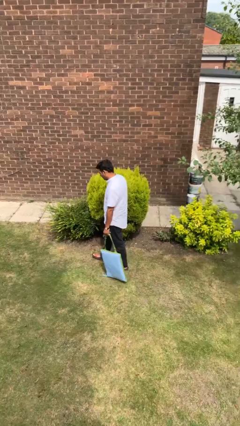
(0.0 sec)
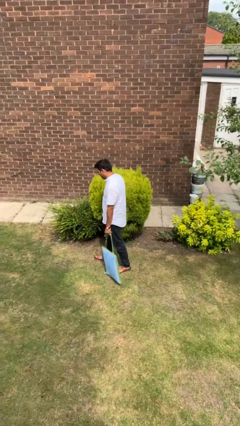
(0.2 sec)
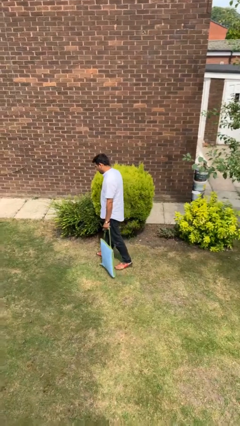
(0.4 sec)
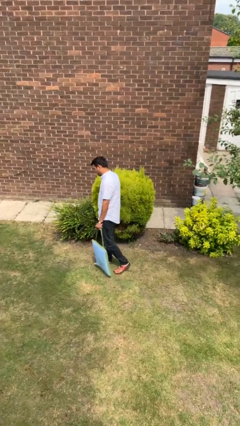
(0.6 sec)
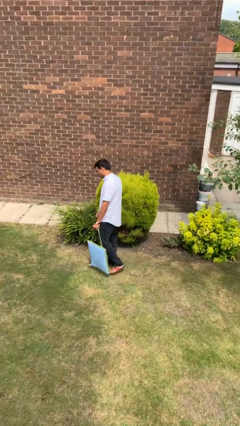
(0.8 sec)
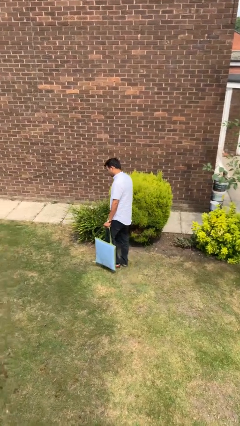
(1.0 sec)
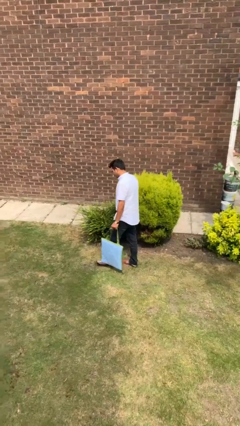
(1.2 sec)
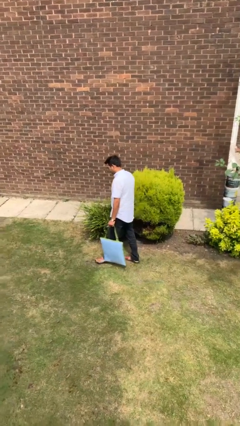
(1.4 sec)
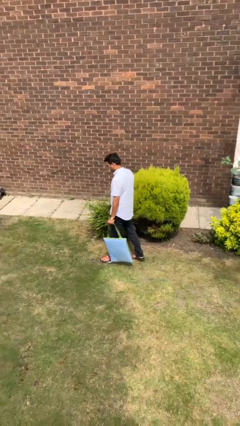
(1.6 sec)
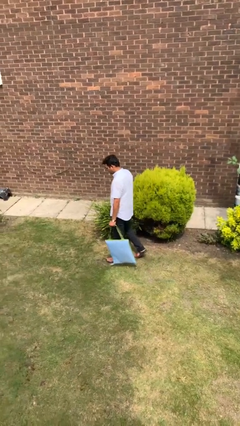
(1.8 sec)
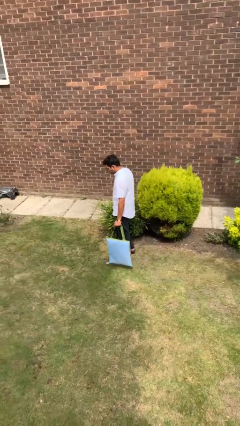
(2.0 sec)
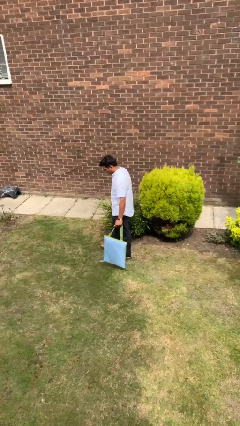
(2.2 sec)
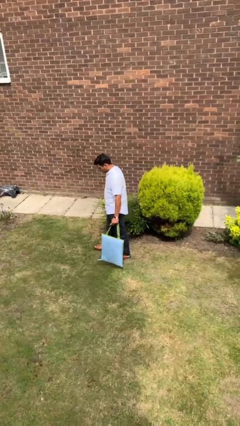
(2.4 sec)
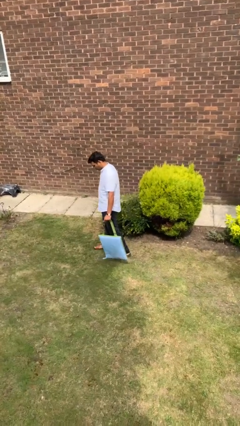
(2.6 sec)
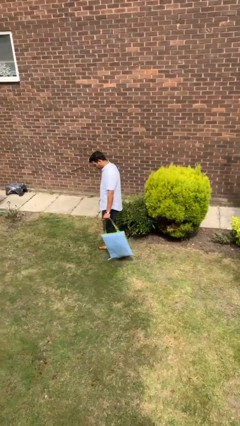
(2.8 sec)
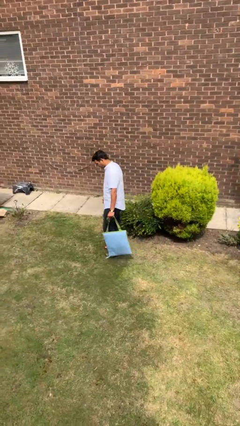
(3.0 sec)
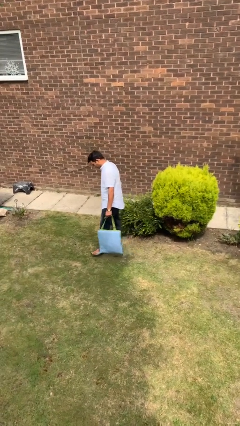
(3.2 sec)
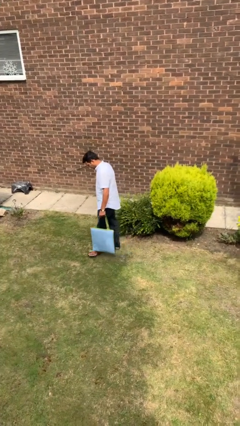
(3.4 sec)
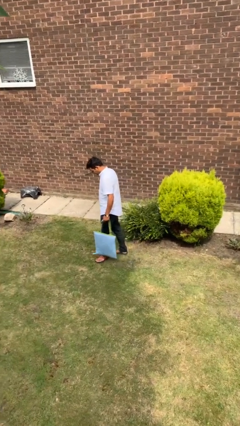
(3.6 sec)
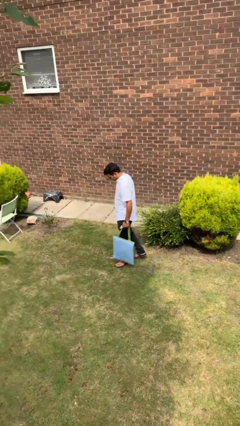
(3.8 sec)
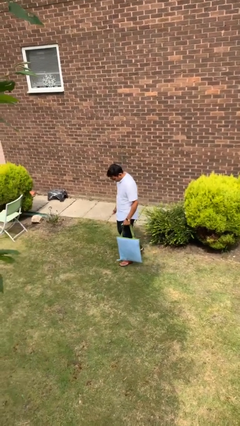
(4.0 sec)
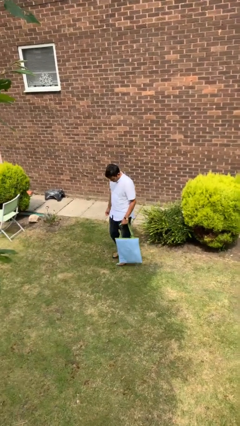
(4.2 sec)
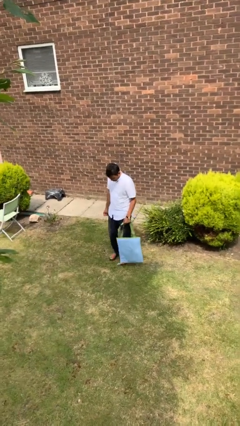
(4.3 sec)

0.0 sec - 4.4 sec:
person carries groceries

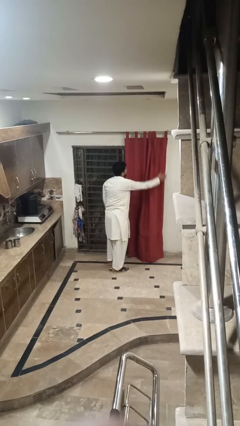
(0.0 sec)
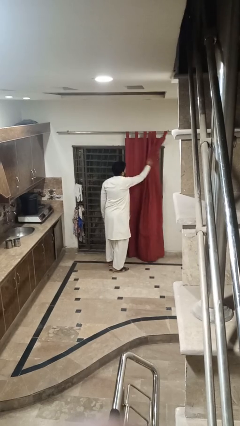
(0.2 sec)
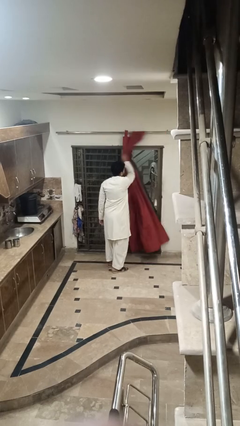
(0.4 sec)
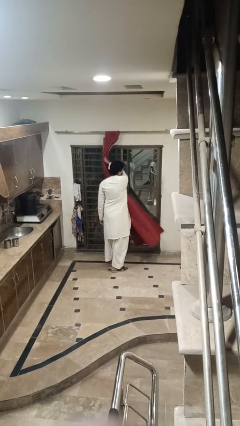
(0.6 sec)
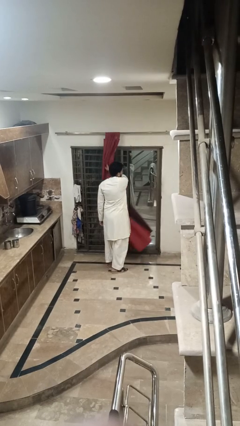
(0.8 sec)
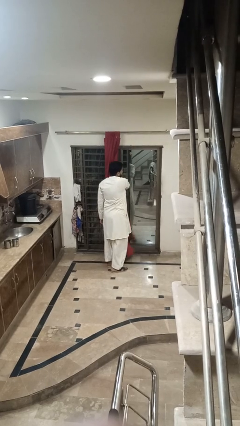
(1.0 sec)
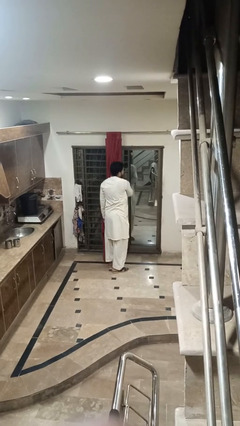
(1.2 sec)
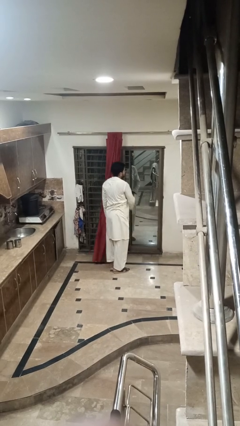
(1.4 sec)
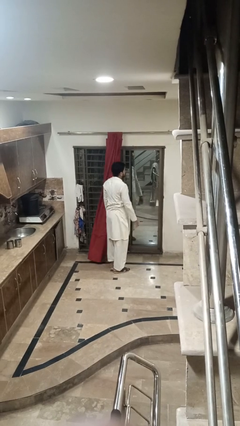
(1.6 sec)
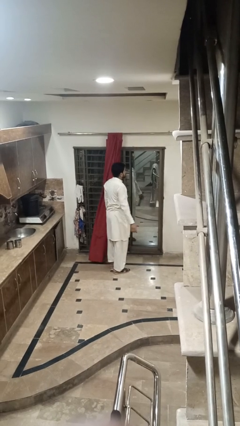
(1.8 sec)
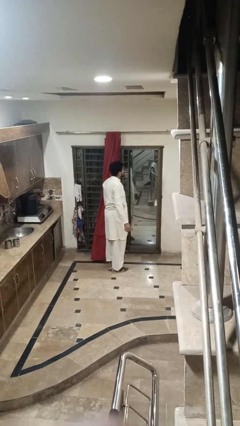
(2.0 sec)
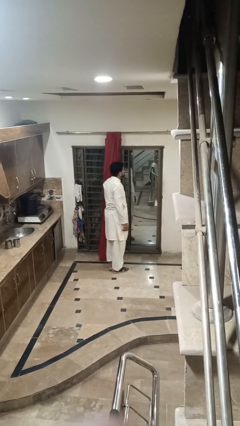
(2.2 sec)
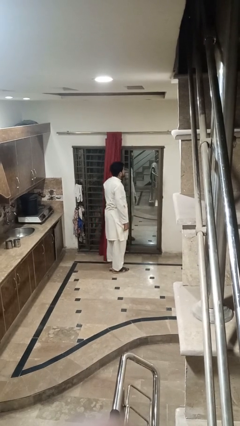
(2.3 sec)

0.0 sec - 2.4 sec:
person opens curtains

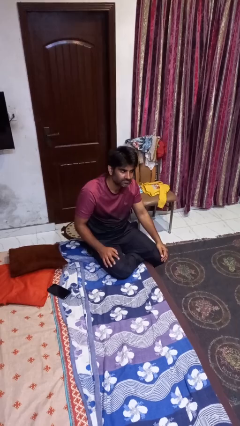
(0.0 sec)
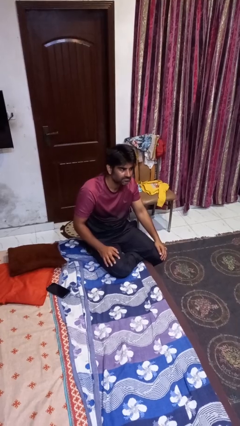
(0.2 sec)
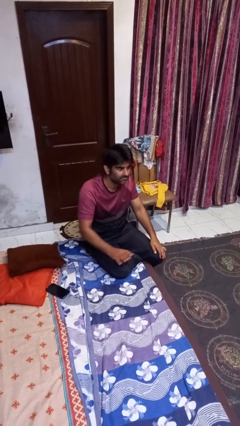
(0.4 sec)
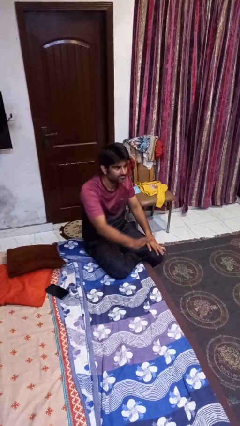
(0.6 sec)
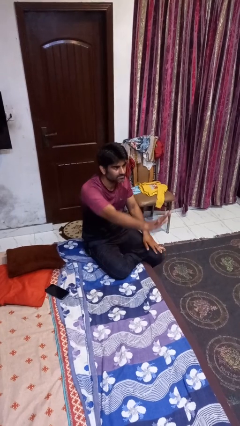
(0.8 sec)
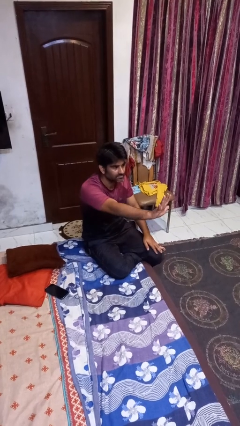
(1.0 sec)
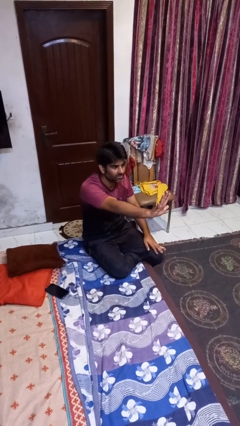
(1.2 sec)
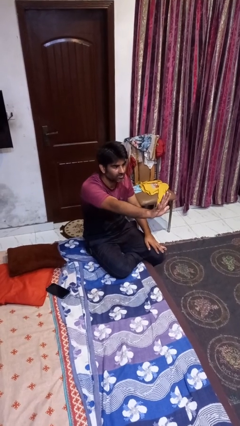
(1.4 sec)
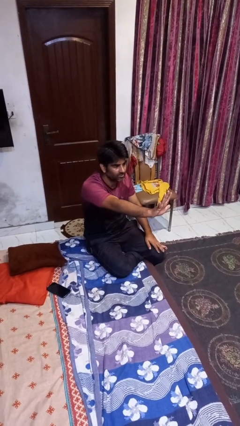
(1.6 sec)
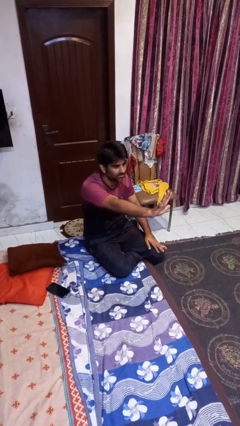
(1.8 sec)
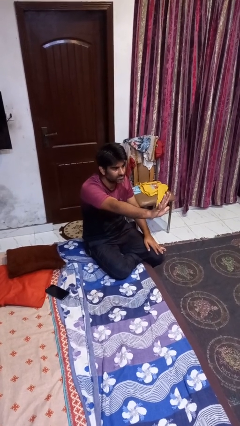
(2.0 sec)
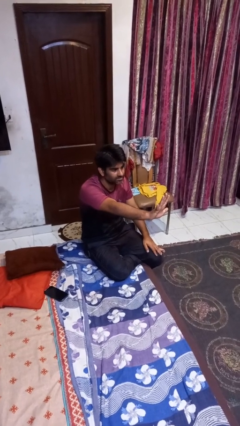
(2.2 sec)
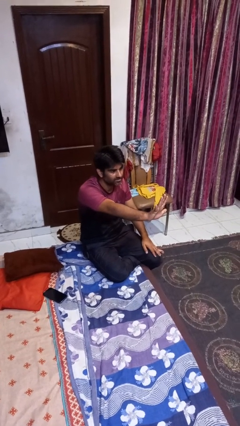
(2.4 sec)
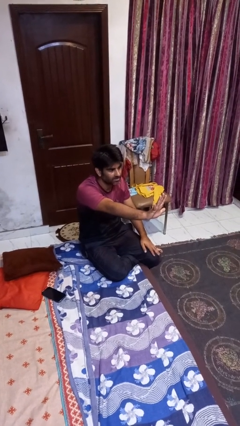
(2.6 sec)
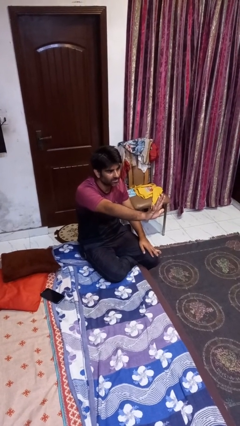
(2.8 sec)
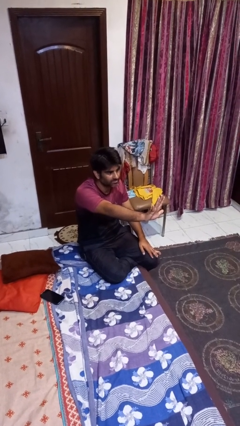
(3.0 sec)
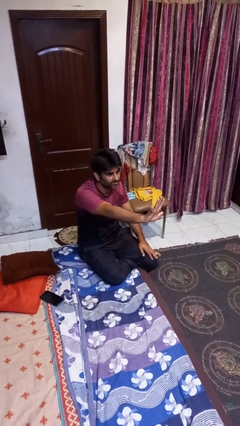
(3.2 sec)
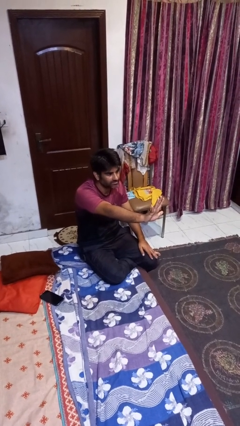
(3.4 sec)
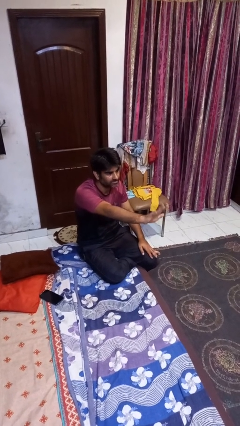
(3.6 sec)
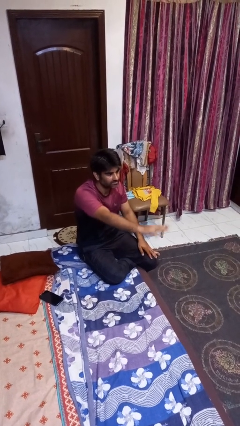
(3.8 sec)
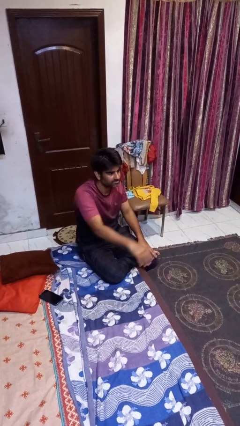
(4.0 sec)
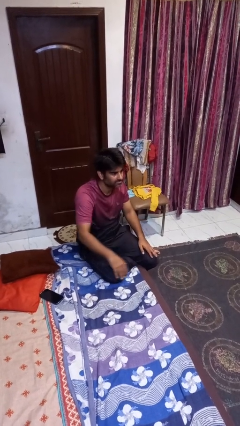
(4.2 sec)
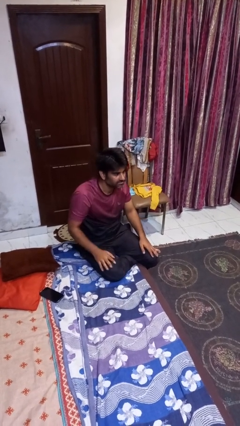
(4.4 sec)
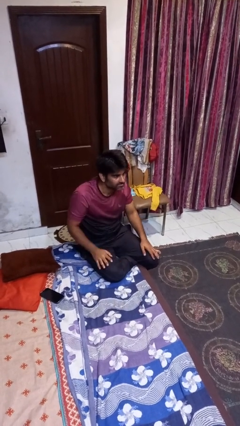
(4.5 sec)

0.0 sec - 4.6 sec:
person gestures number five

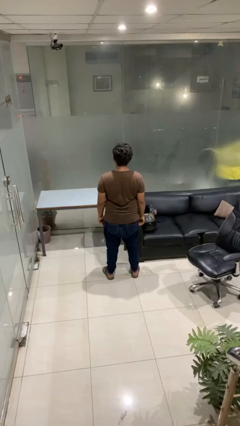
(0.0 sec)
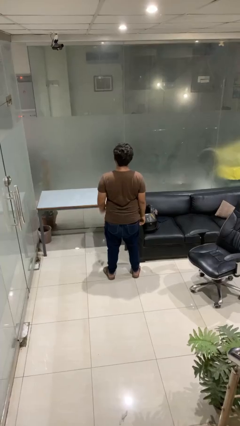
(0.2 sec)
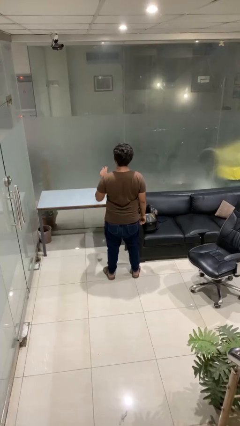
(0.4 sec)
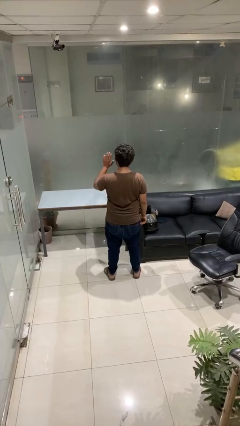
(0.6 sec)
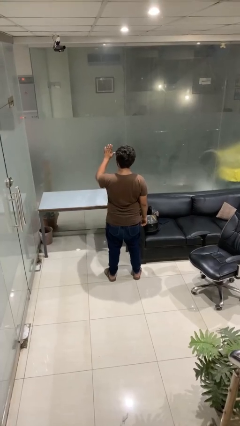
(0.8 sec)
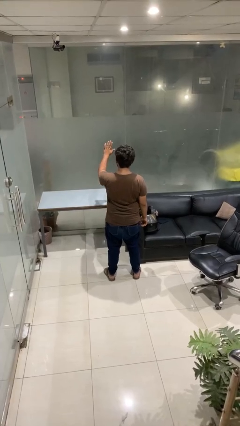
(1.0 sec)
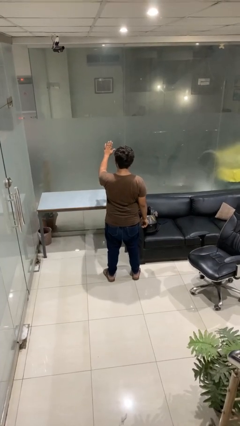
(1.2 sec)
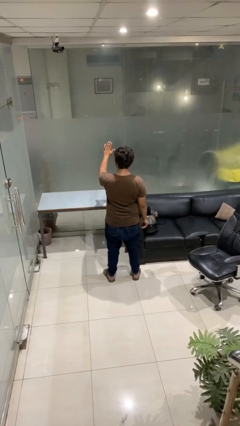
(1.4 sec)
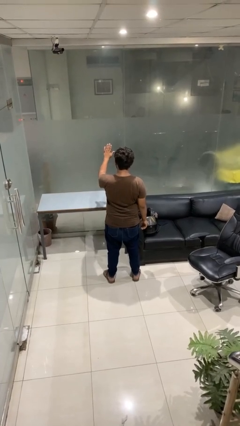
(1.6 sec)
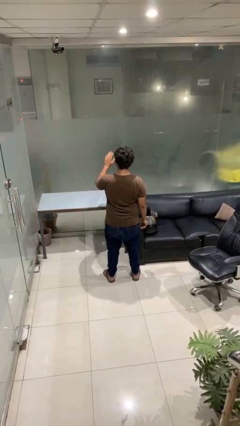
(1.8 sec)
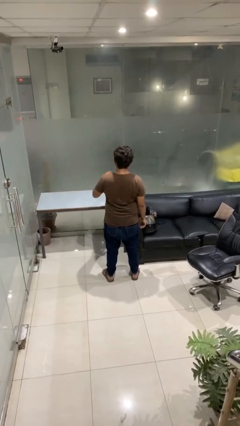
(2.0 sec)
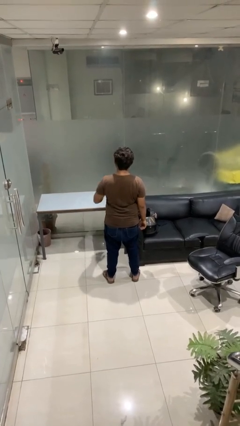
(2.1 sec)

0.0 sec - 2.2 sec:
person gestures stop

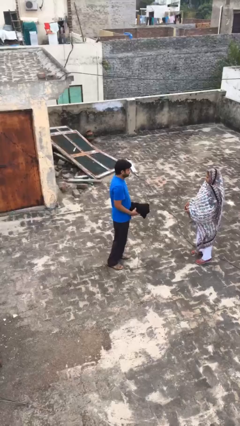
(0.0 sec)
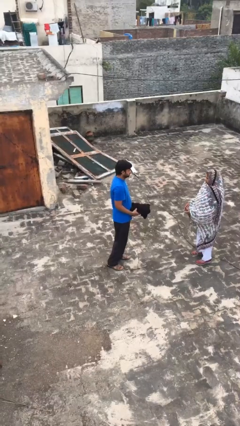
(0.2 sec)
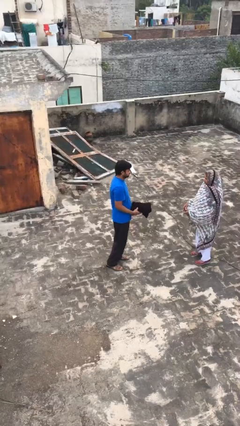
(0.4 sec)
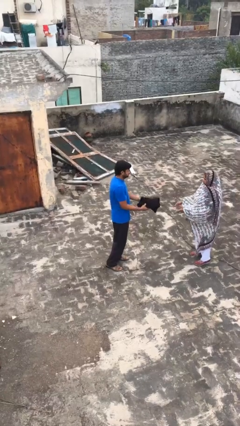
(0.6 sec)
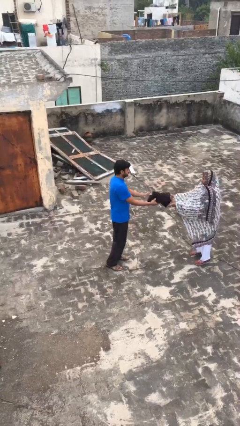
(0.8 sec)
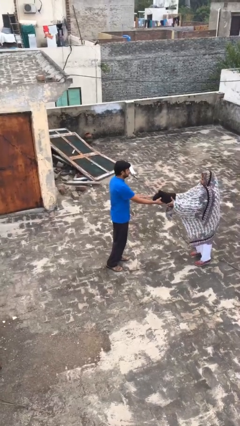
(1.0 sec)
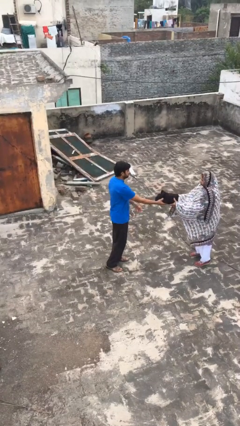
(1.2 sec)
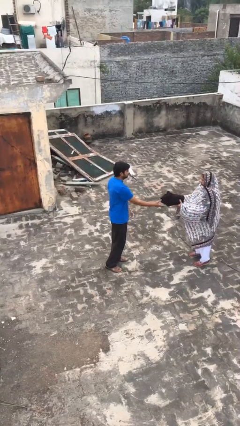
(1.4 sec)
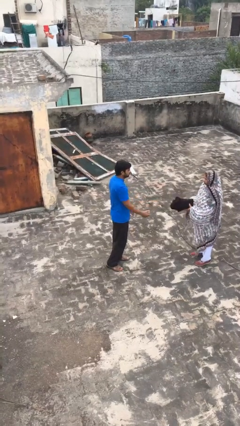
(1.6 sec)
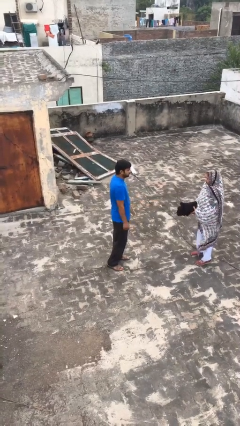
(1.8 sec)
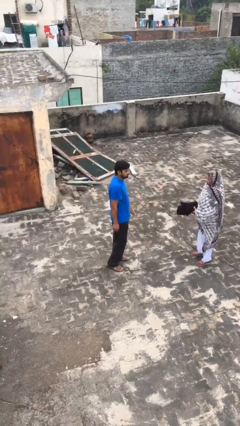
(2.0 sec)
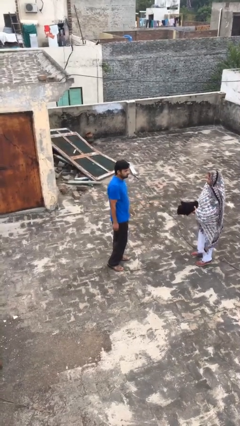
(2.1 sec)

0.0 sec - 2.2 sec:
person transfers object to person

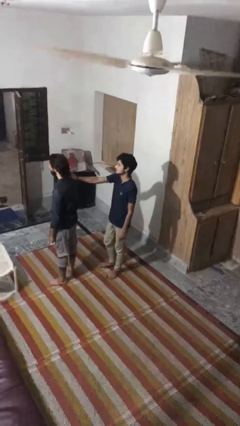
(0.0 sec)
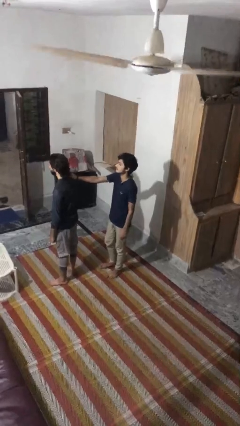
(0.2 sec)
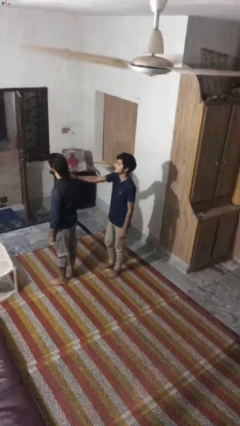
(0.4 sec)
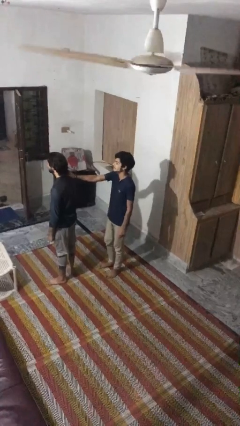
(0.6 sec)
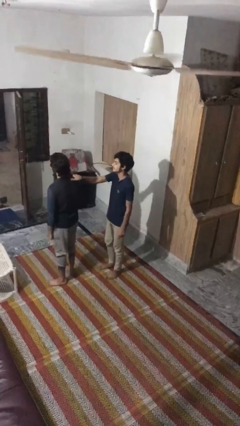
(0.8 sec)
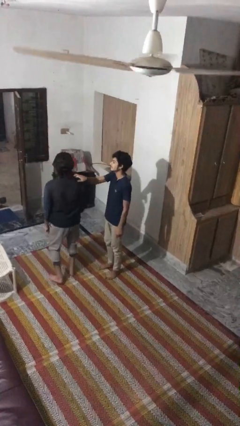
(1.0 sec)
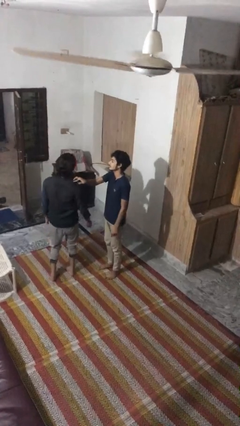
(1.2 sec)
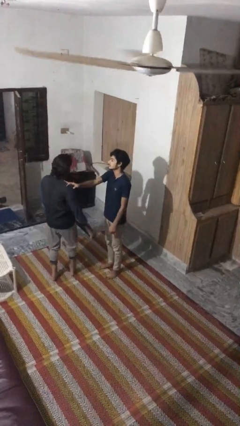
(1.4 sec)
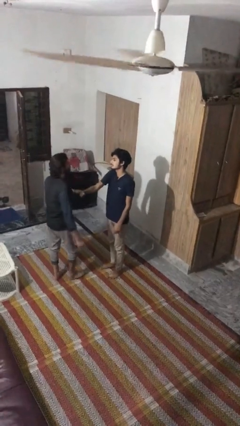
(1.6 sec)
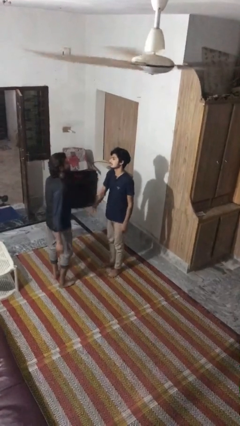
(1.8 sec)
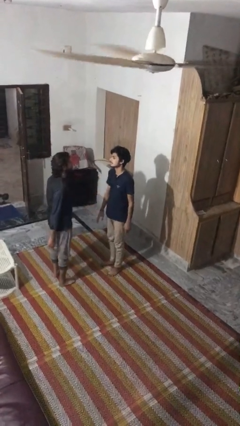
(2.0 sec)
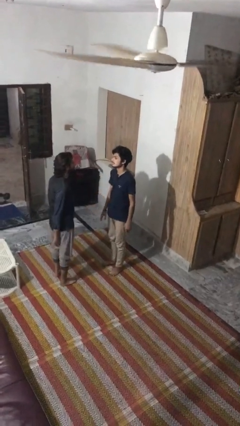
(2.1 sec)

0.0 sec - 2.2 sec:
person spins person around
